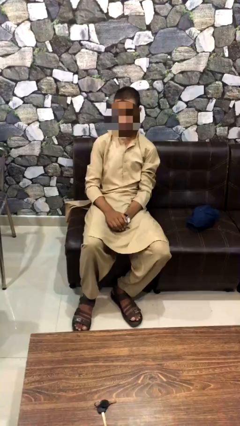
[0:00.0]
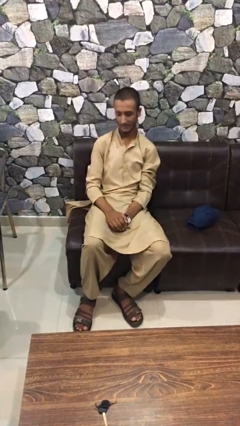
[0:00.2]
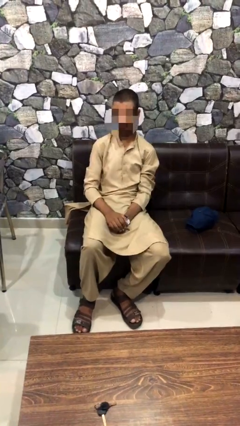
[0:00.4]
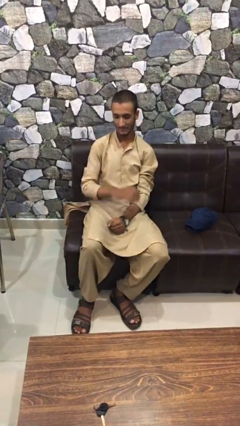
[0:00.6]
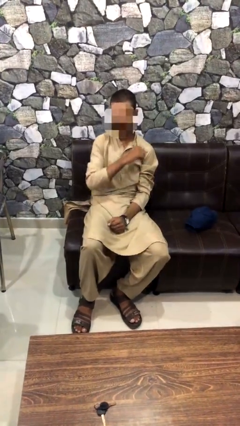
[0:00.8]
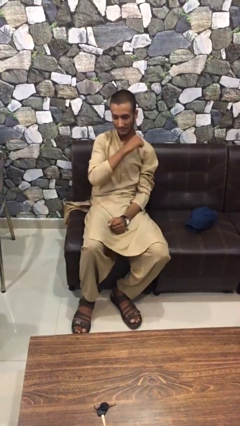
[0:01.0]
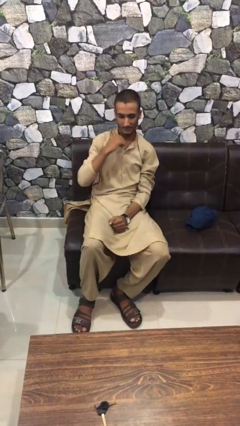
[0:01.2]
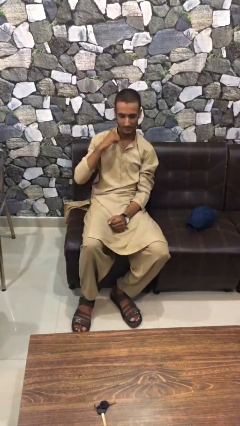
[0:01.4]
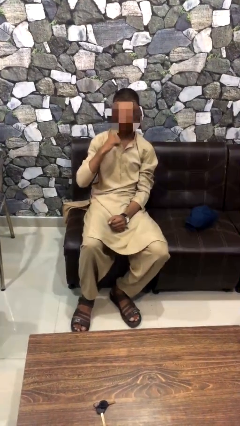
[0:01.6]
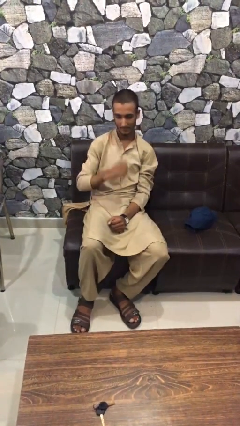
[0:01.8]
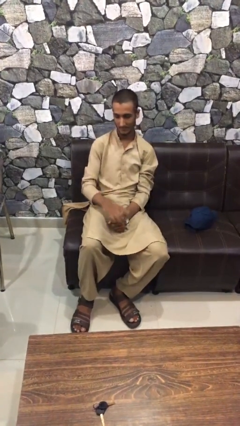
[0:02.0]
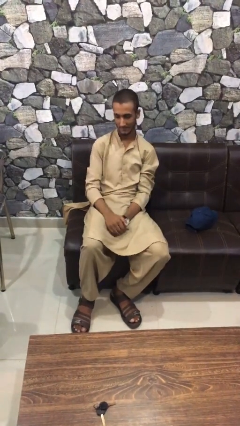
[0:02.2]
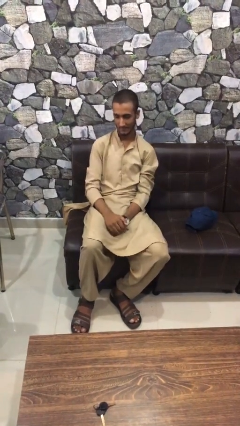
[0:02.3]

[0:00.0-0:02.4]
person gestures cut

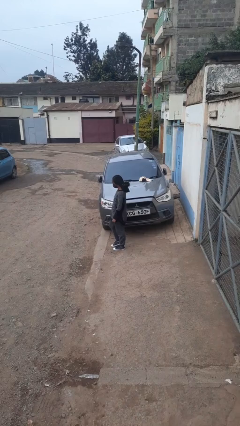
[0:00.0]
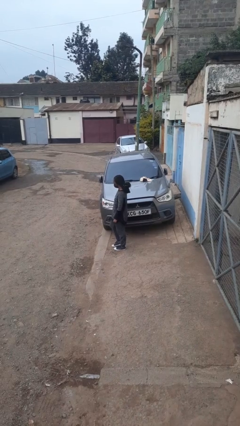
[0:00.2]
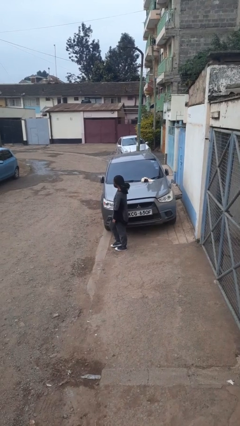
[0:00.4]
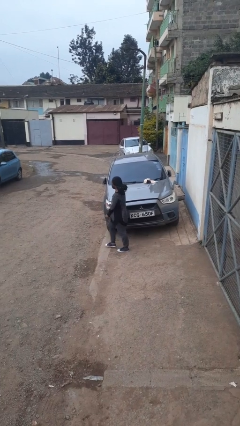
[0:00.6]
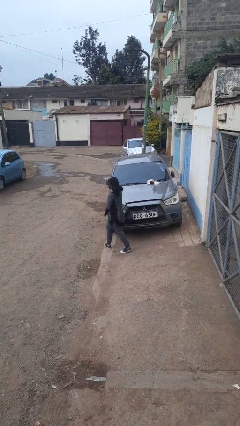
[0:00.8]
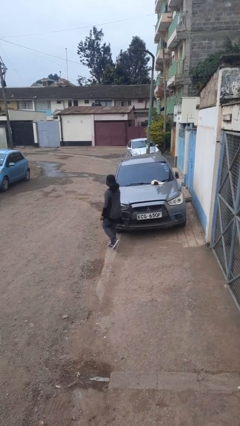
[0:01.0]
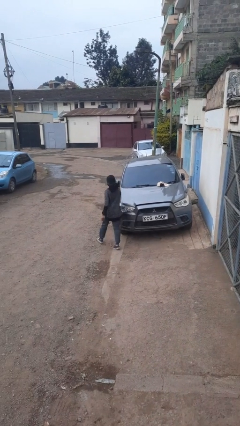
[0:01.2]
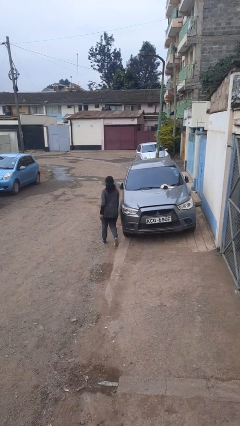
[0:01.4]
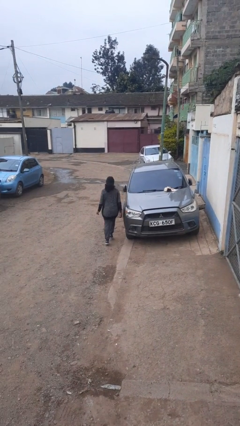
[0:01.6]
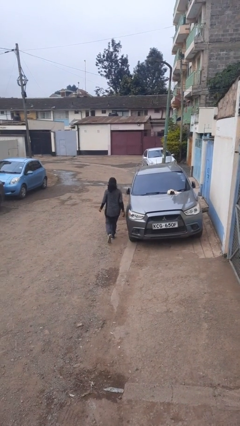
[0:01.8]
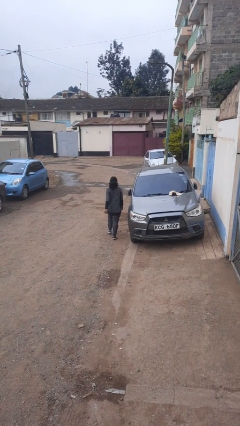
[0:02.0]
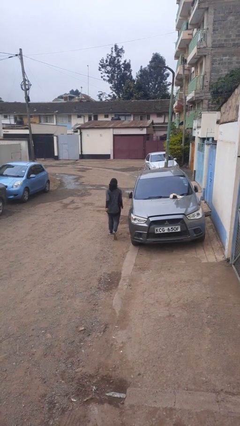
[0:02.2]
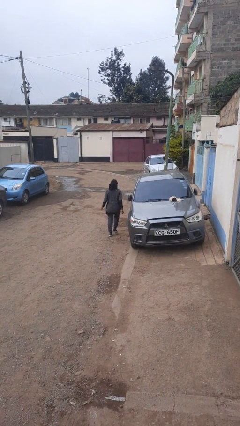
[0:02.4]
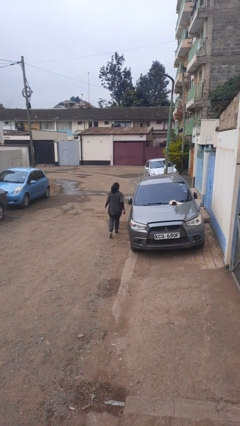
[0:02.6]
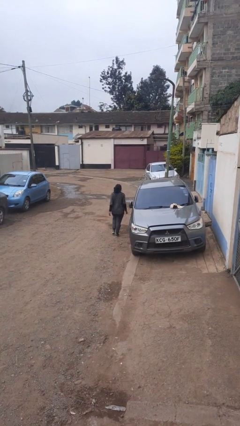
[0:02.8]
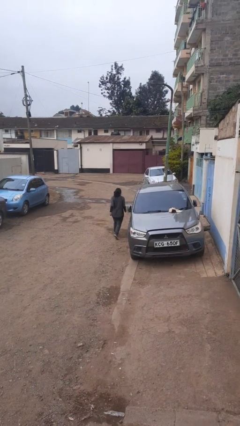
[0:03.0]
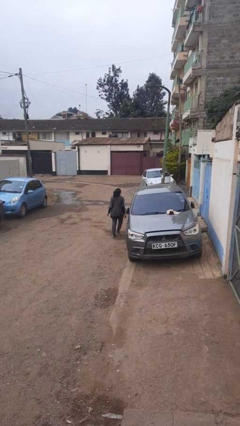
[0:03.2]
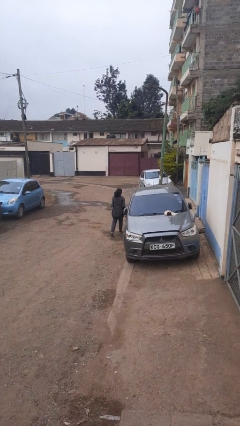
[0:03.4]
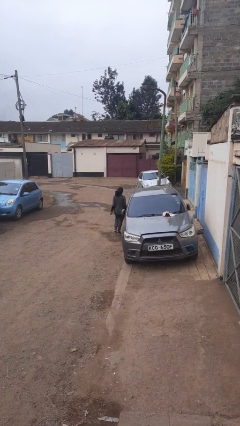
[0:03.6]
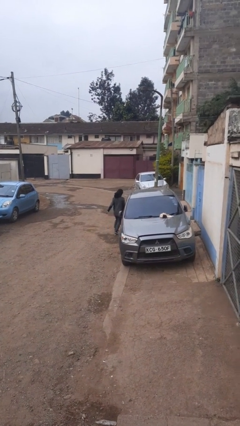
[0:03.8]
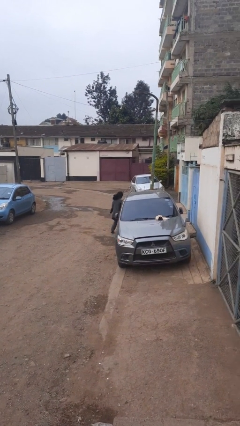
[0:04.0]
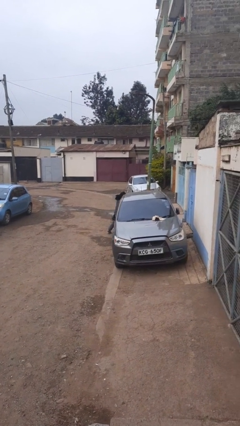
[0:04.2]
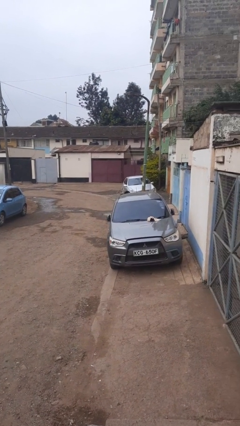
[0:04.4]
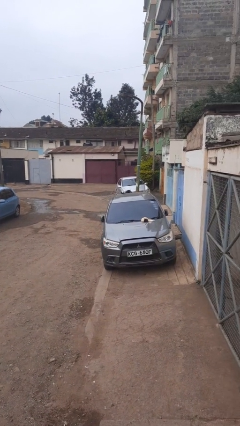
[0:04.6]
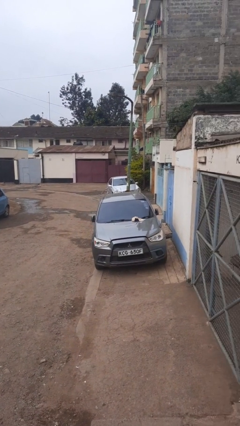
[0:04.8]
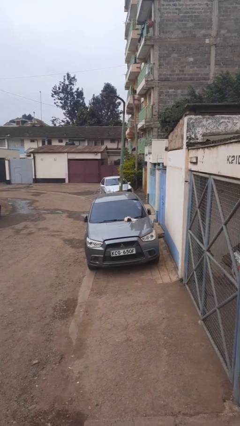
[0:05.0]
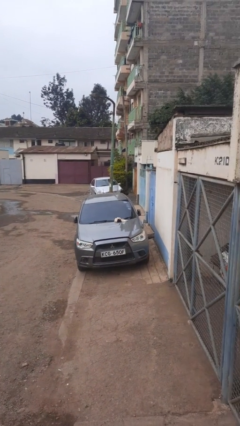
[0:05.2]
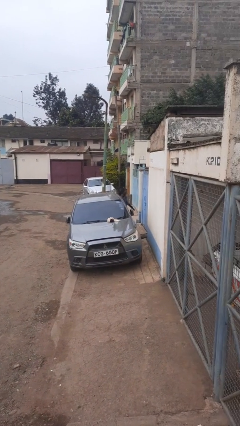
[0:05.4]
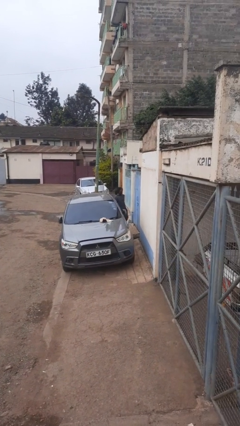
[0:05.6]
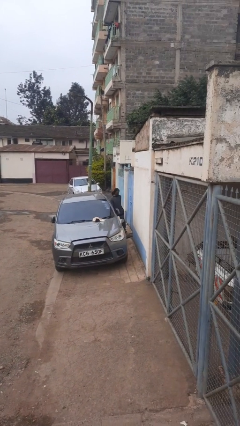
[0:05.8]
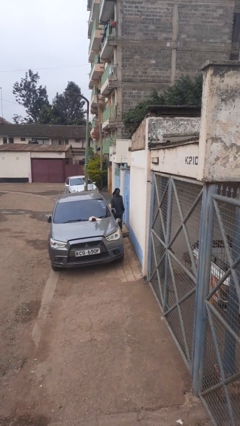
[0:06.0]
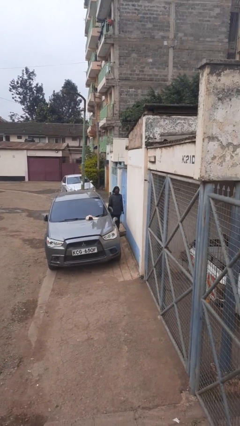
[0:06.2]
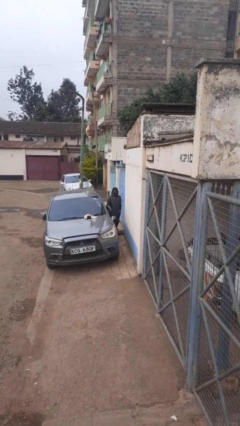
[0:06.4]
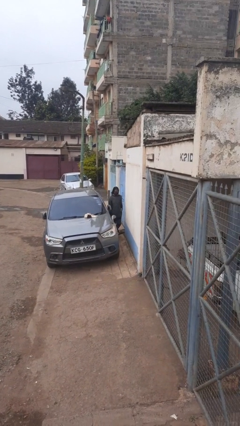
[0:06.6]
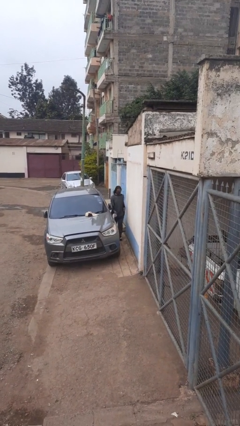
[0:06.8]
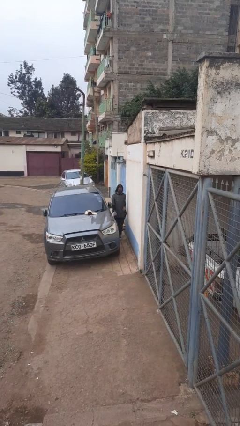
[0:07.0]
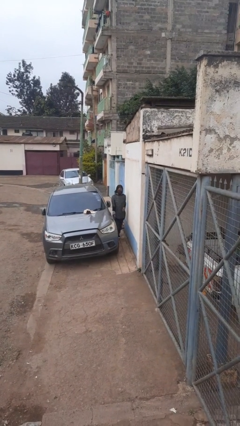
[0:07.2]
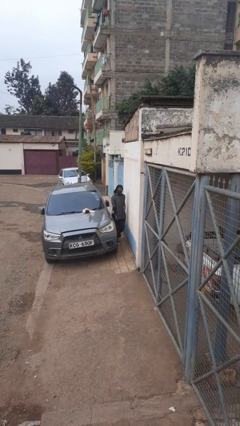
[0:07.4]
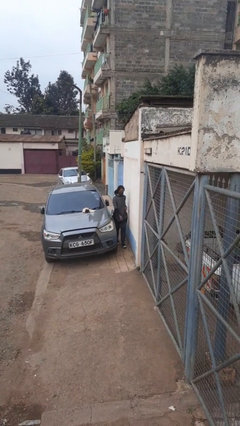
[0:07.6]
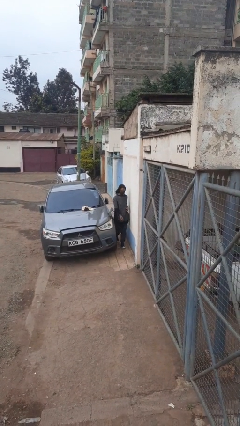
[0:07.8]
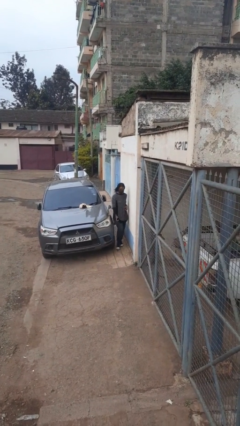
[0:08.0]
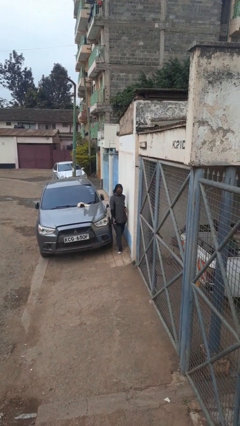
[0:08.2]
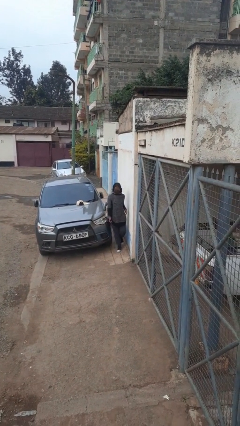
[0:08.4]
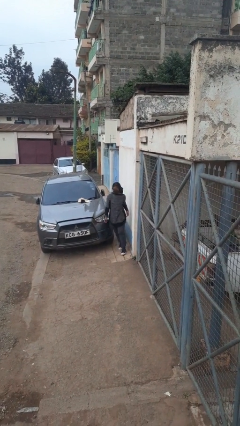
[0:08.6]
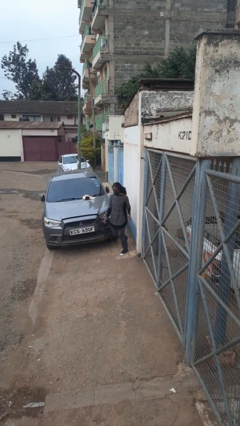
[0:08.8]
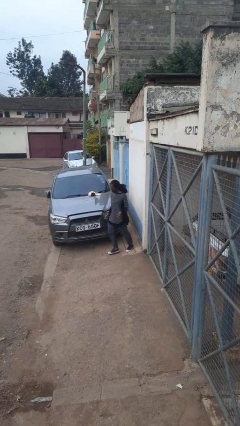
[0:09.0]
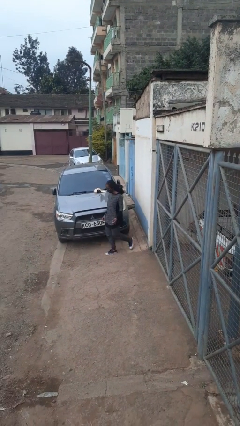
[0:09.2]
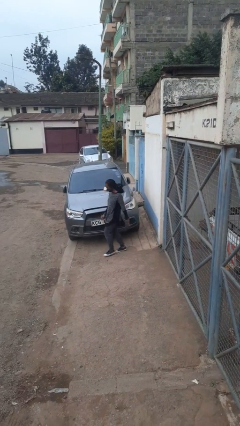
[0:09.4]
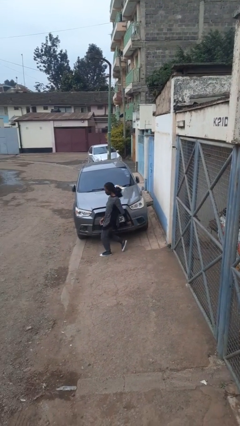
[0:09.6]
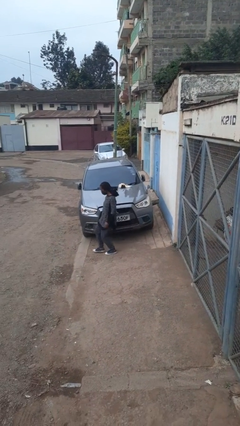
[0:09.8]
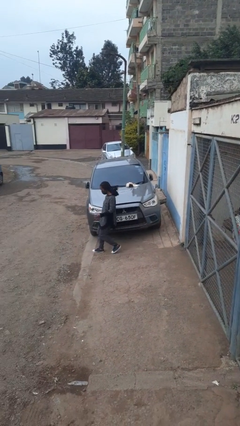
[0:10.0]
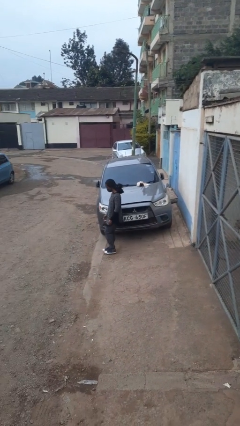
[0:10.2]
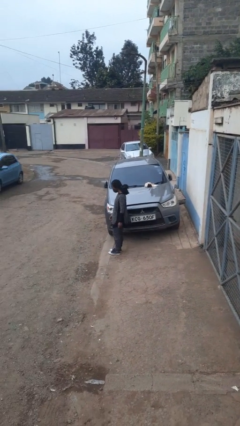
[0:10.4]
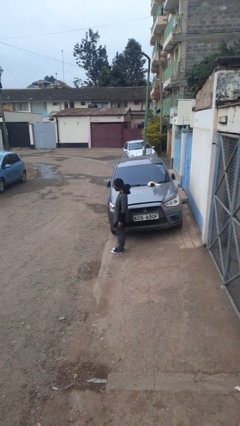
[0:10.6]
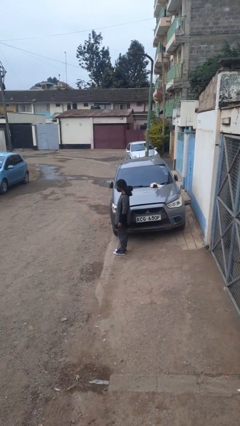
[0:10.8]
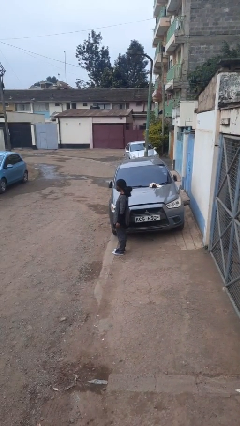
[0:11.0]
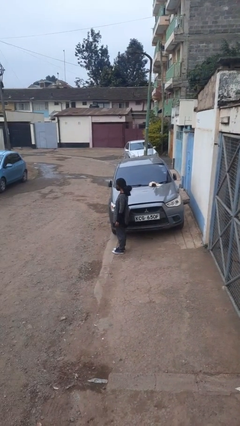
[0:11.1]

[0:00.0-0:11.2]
person walks around car

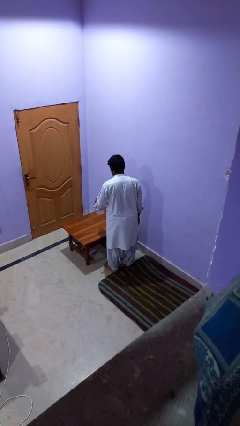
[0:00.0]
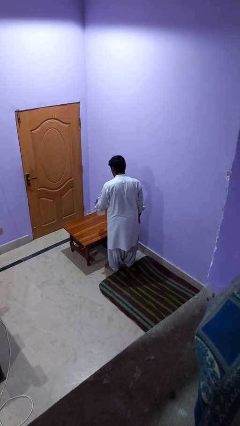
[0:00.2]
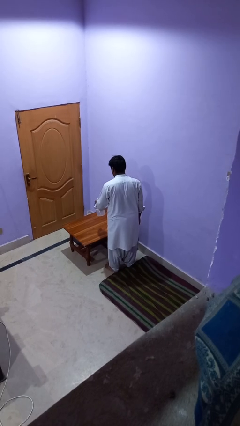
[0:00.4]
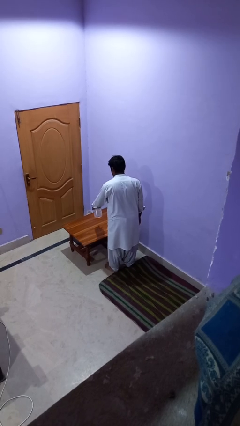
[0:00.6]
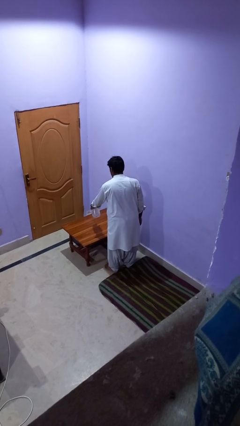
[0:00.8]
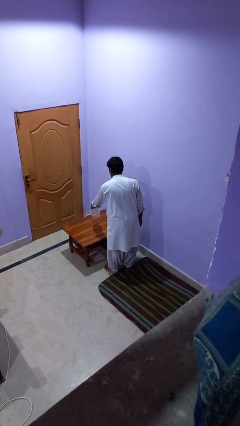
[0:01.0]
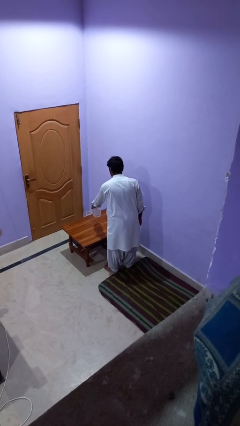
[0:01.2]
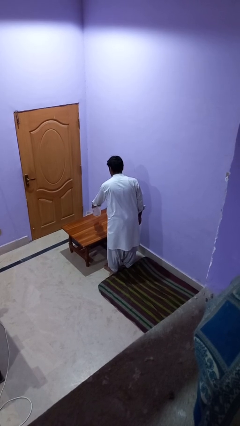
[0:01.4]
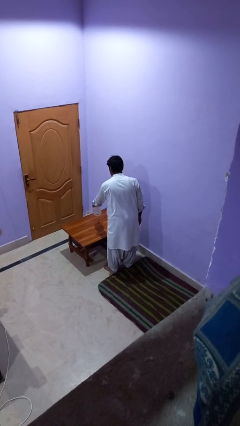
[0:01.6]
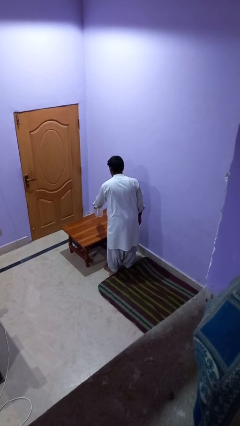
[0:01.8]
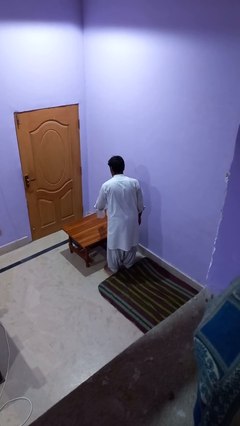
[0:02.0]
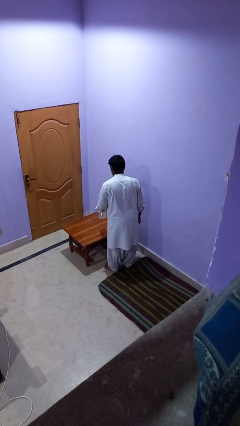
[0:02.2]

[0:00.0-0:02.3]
person sprays from bottle

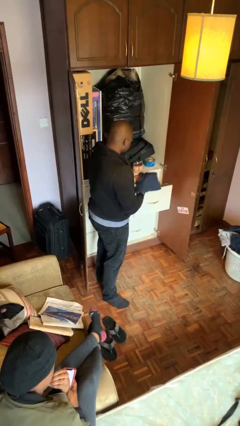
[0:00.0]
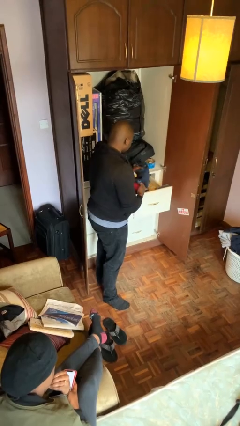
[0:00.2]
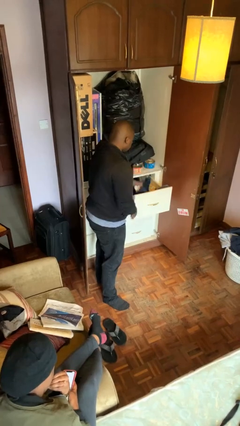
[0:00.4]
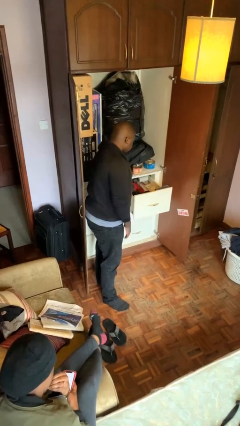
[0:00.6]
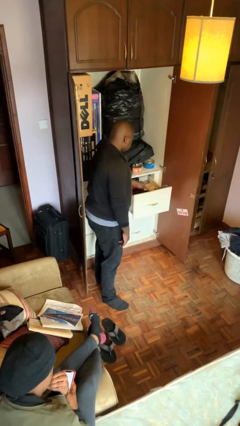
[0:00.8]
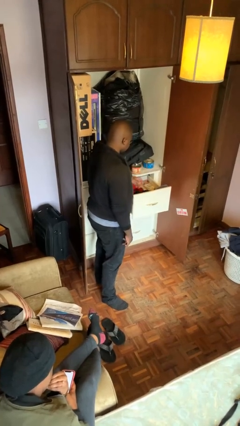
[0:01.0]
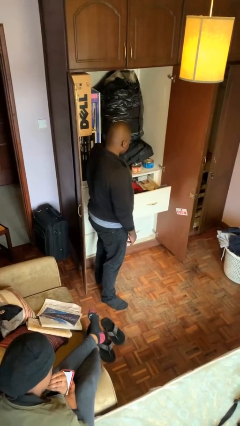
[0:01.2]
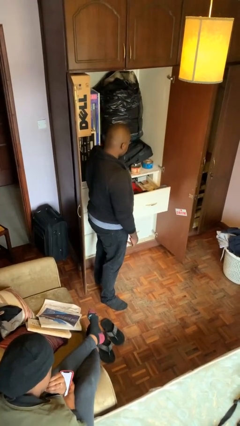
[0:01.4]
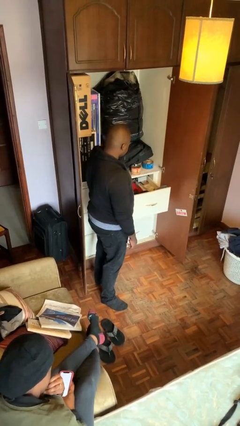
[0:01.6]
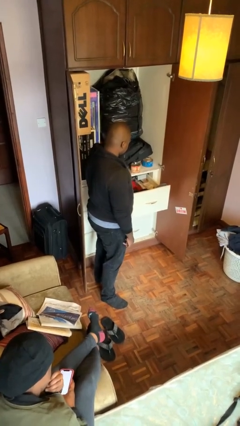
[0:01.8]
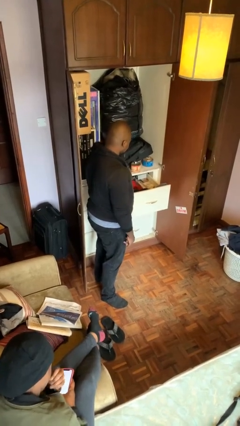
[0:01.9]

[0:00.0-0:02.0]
person puts clothes into dresser

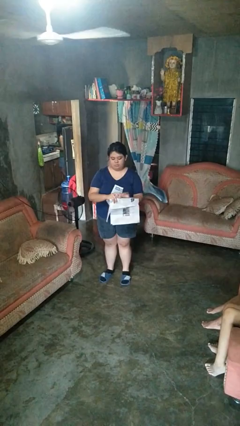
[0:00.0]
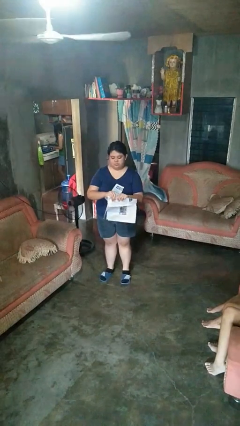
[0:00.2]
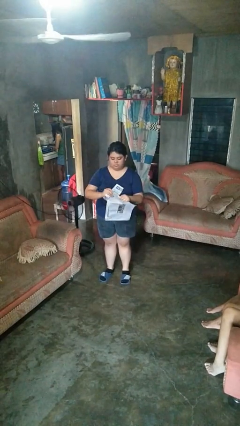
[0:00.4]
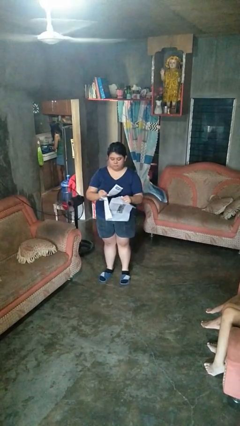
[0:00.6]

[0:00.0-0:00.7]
person tears paper
